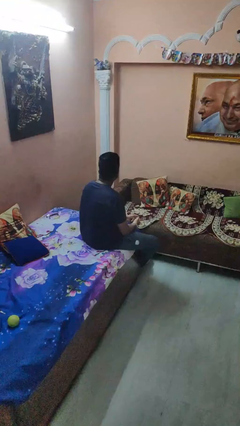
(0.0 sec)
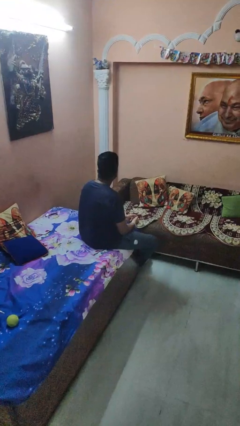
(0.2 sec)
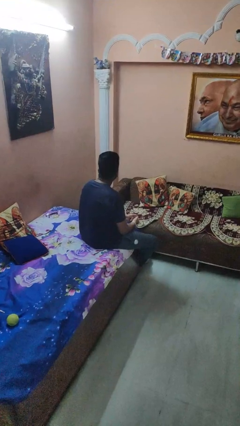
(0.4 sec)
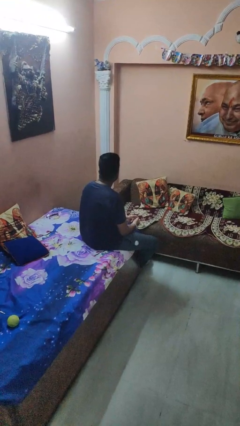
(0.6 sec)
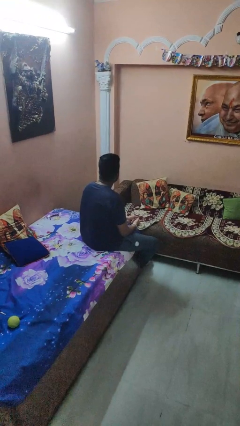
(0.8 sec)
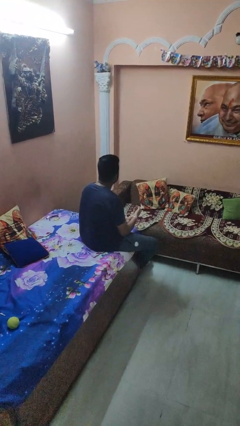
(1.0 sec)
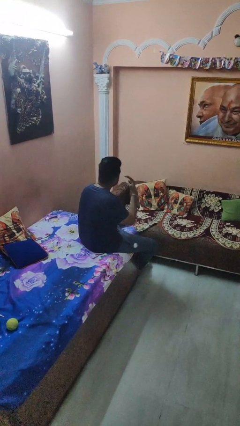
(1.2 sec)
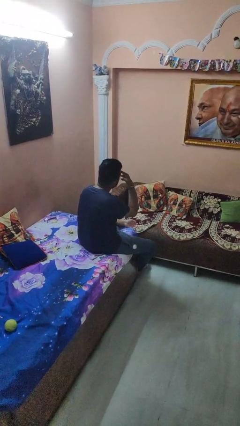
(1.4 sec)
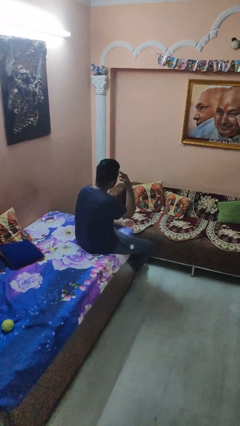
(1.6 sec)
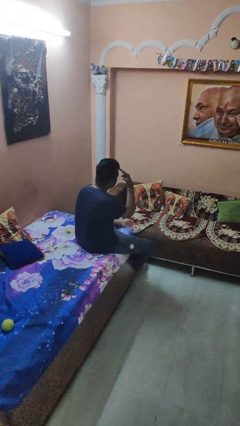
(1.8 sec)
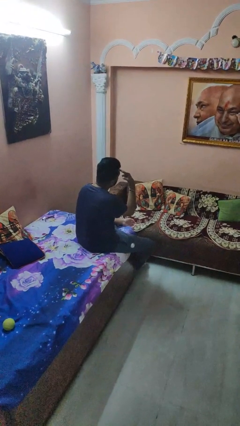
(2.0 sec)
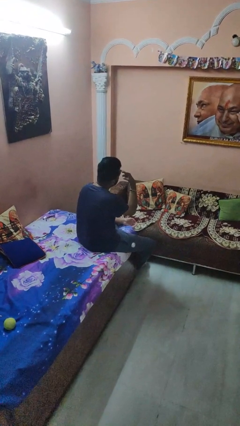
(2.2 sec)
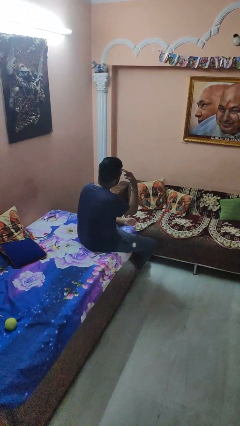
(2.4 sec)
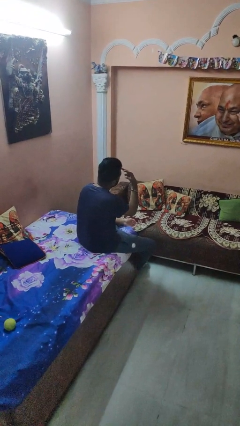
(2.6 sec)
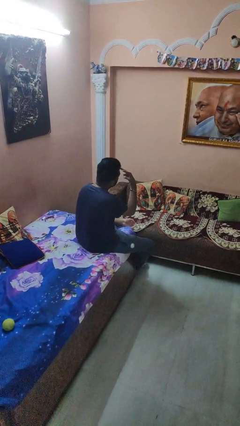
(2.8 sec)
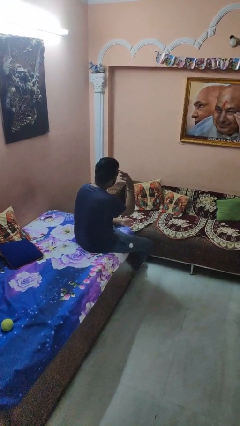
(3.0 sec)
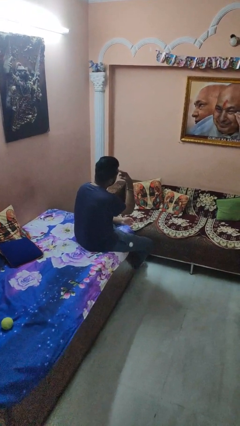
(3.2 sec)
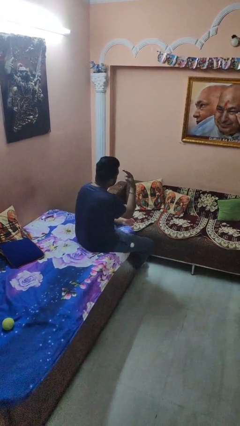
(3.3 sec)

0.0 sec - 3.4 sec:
person gestures watch closely

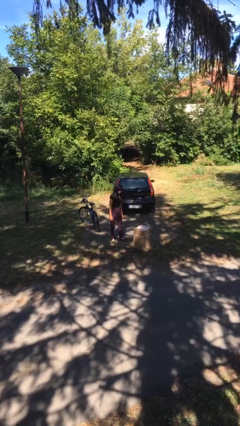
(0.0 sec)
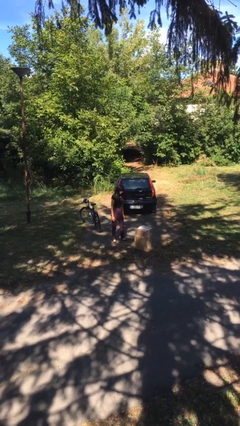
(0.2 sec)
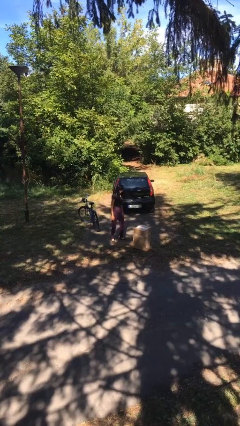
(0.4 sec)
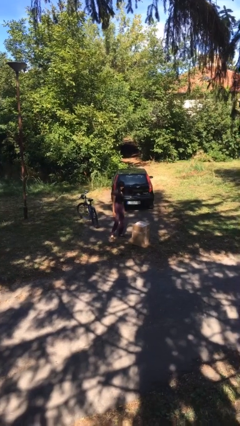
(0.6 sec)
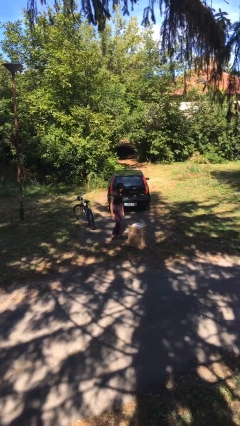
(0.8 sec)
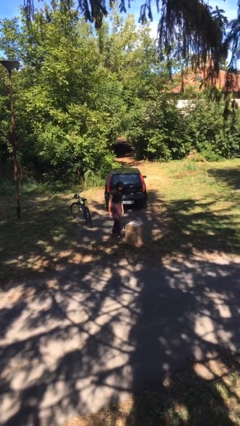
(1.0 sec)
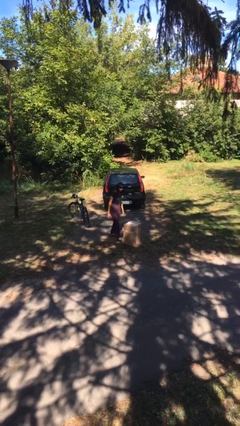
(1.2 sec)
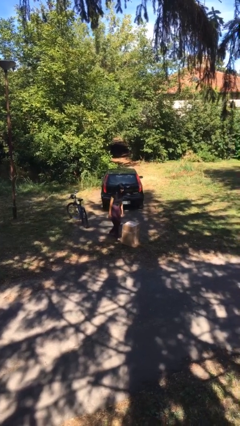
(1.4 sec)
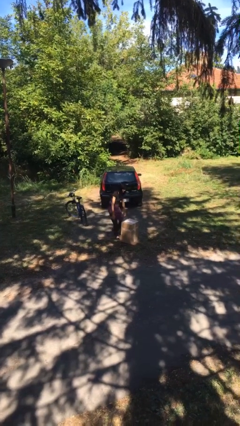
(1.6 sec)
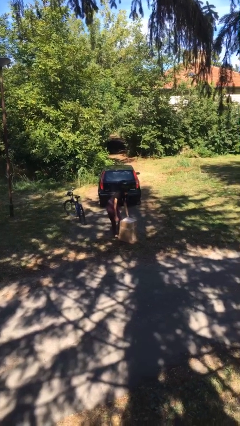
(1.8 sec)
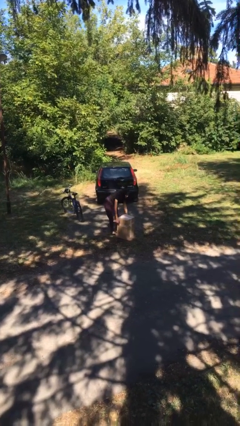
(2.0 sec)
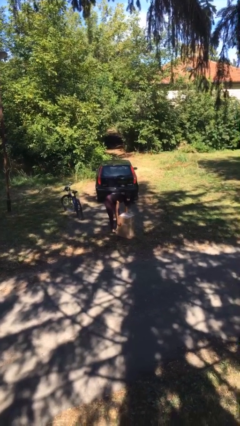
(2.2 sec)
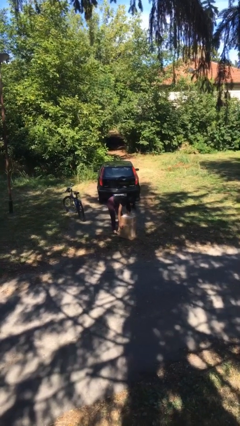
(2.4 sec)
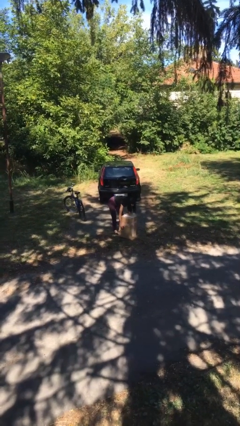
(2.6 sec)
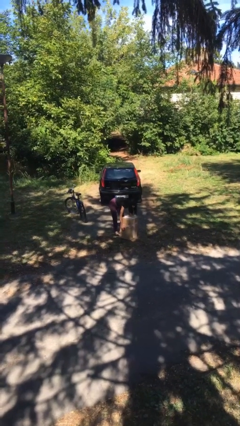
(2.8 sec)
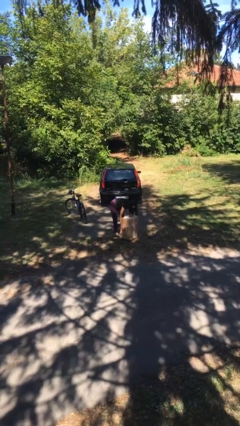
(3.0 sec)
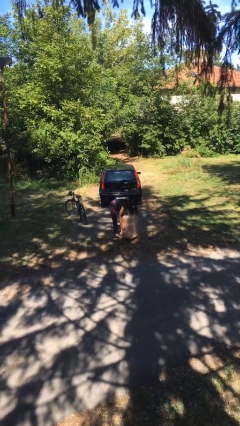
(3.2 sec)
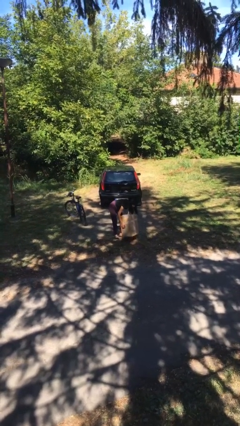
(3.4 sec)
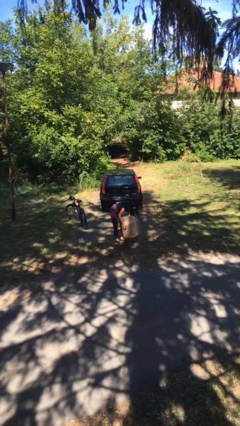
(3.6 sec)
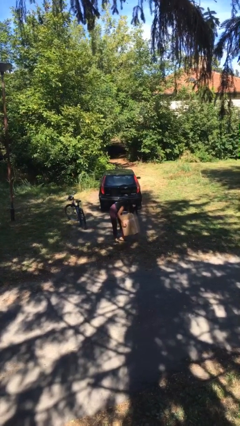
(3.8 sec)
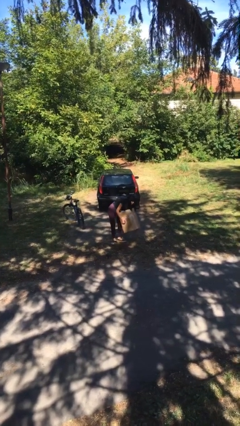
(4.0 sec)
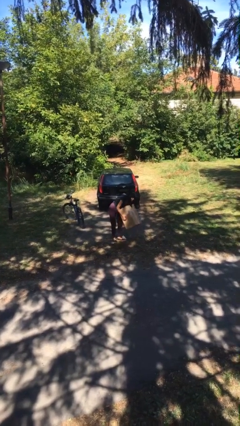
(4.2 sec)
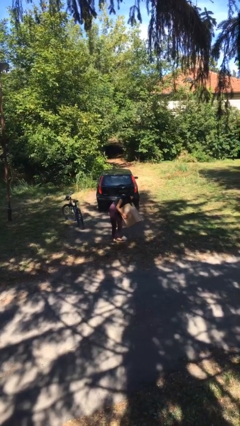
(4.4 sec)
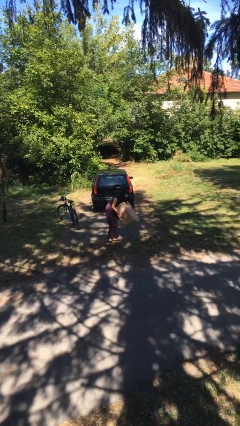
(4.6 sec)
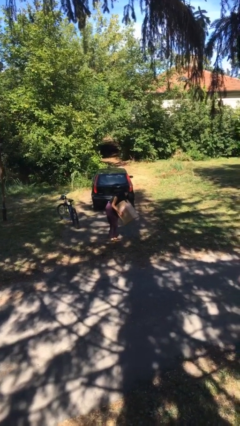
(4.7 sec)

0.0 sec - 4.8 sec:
person picks up object from floor

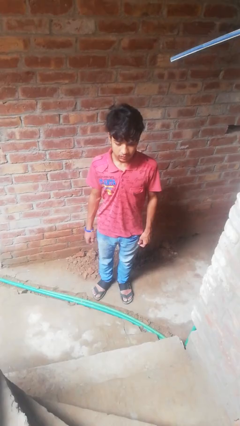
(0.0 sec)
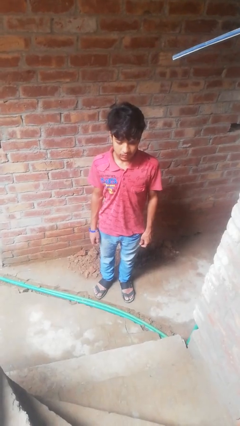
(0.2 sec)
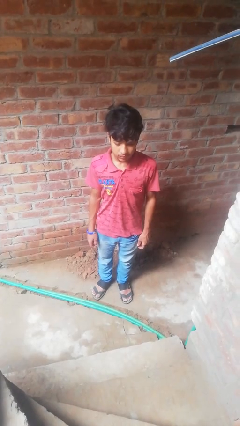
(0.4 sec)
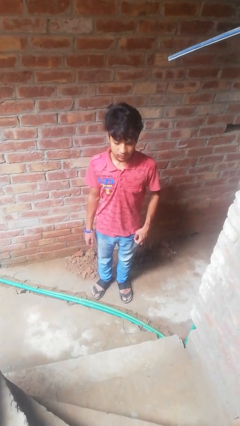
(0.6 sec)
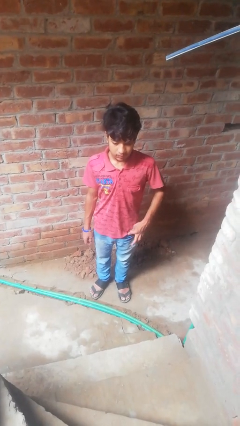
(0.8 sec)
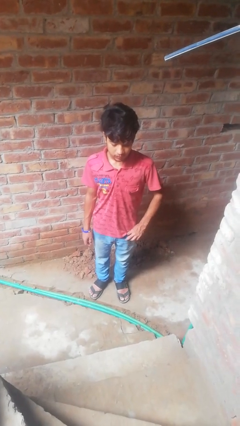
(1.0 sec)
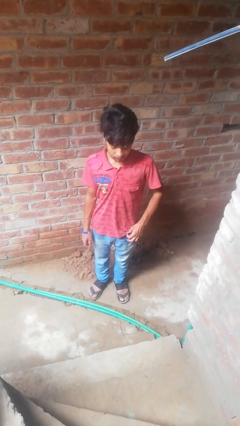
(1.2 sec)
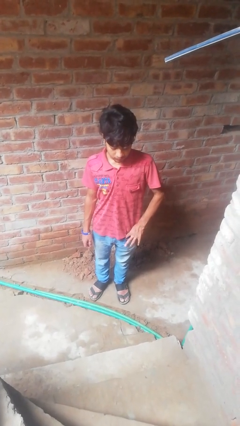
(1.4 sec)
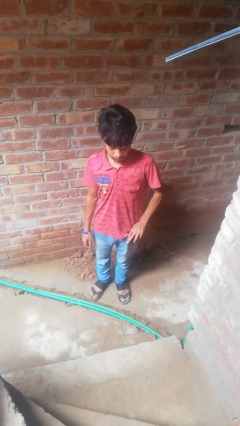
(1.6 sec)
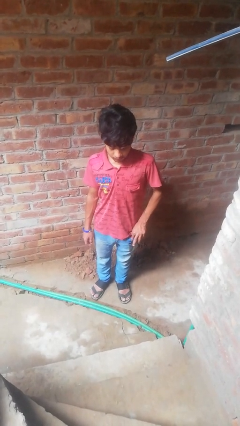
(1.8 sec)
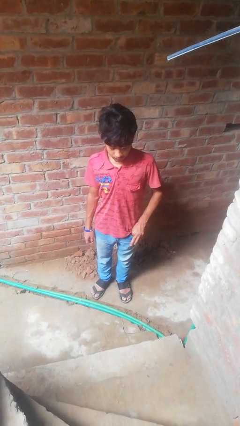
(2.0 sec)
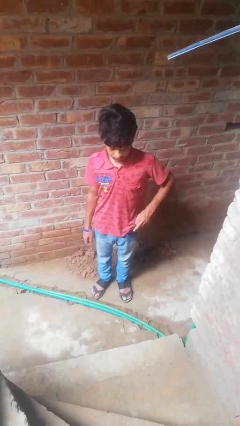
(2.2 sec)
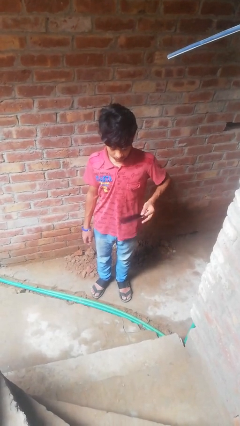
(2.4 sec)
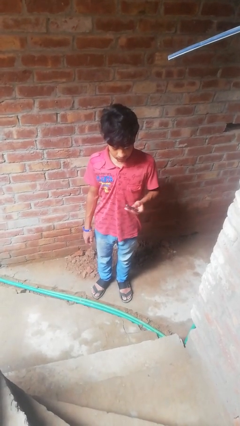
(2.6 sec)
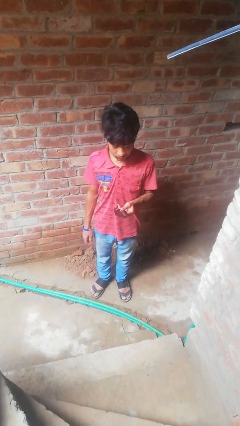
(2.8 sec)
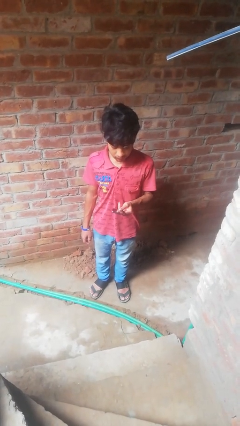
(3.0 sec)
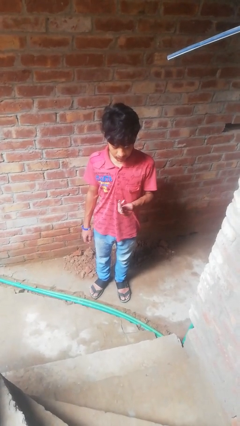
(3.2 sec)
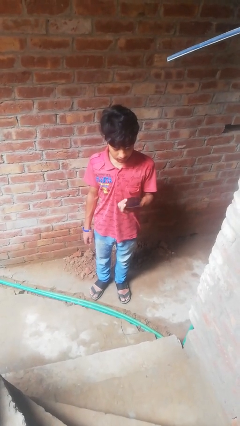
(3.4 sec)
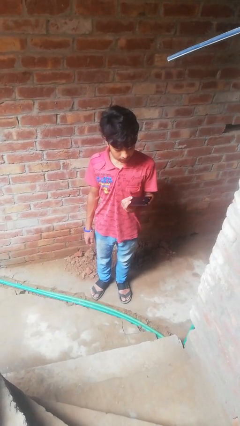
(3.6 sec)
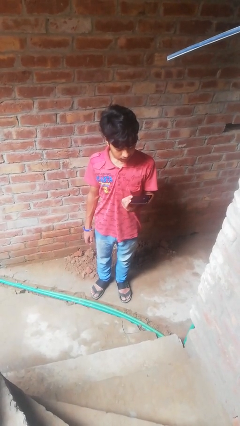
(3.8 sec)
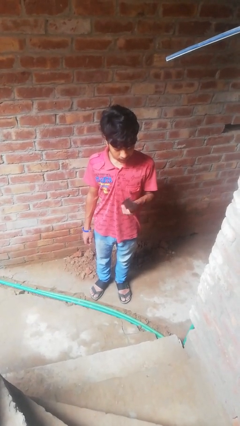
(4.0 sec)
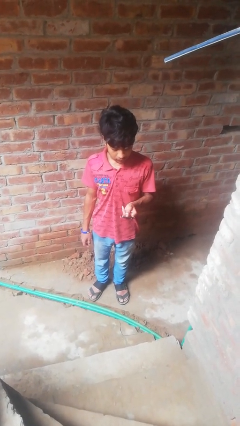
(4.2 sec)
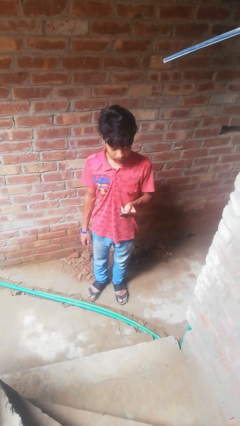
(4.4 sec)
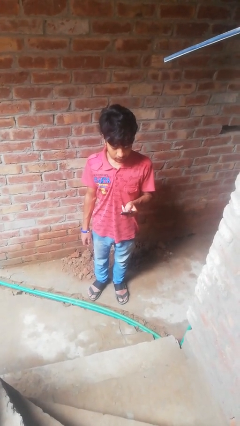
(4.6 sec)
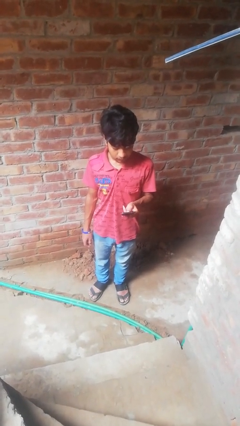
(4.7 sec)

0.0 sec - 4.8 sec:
person takes phone from pocket

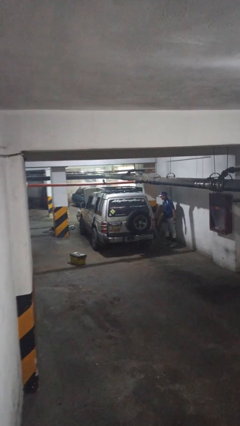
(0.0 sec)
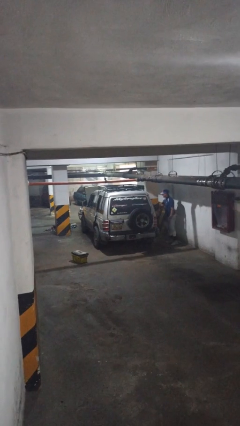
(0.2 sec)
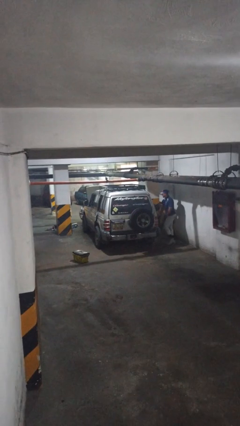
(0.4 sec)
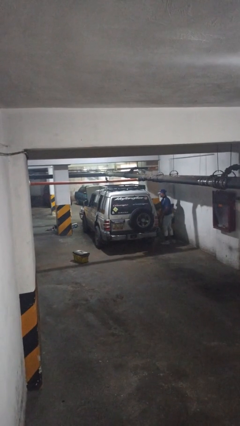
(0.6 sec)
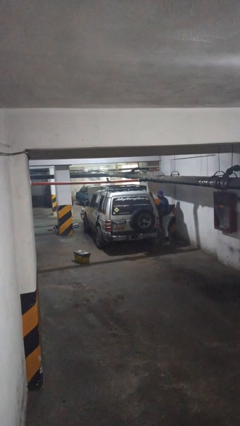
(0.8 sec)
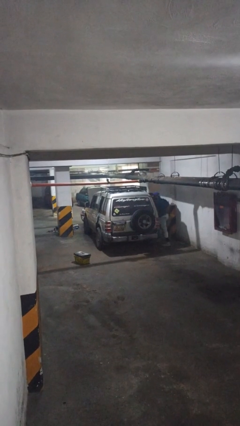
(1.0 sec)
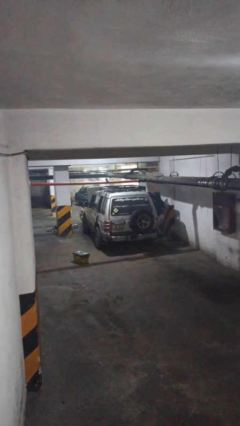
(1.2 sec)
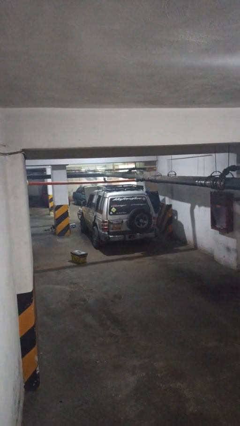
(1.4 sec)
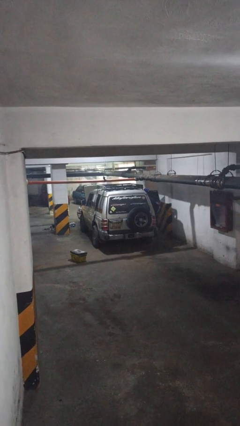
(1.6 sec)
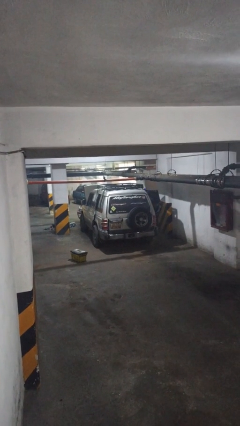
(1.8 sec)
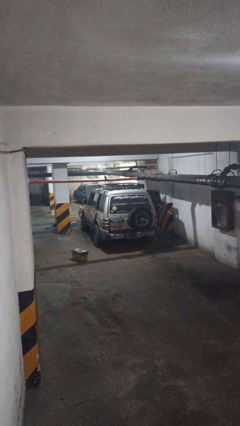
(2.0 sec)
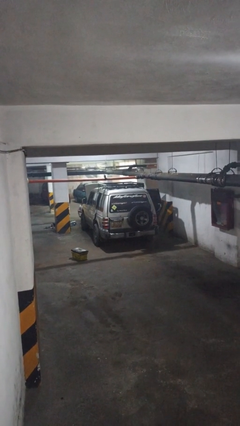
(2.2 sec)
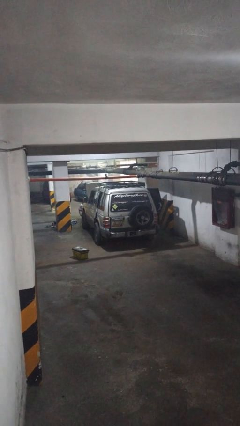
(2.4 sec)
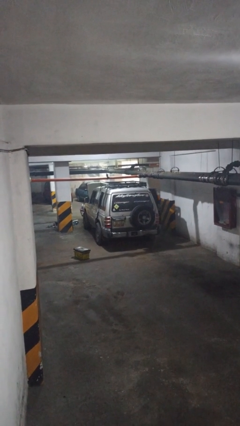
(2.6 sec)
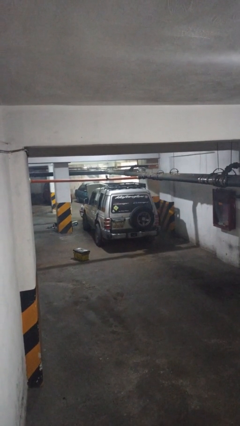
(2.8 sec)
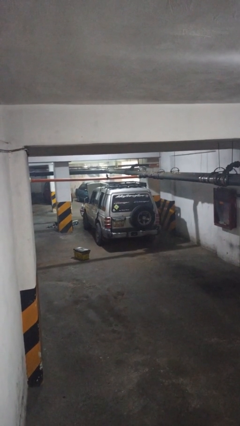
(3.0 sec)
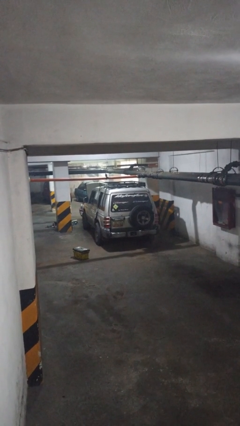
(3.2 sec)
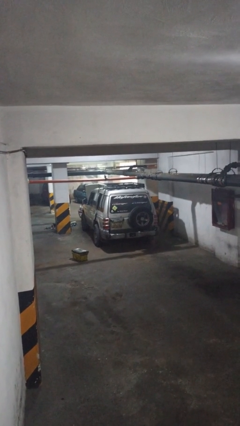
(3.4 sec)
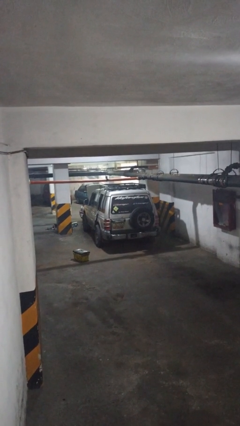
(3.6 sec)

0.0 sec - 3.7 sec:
car picks up person

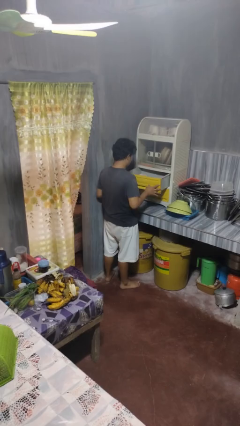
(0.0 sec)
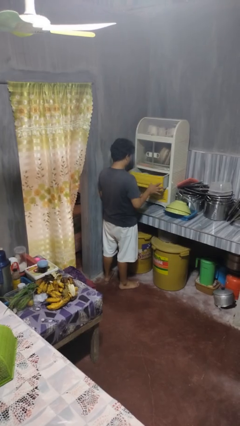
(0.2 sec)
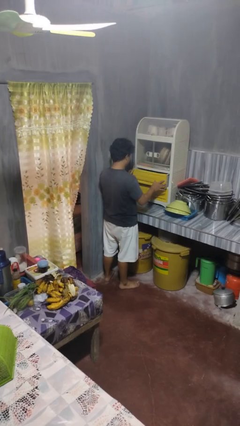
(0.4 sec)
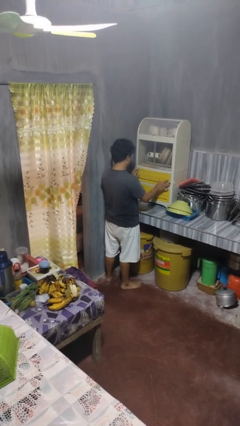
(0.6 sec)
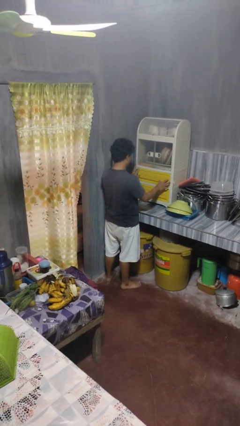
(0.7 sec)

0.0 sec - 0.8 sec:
person closes kitchen drawer

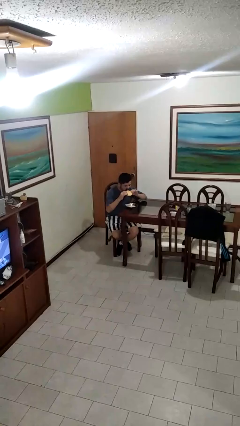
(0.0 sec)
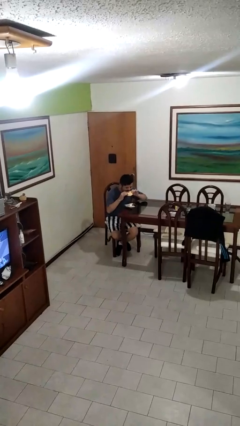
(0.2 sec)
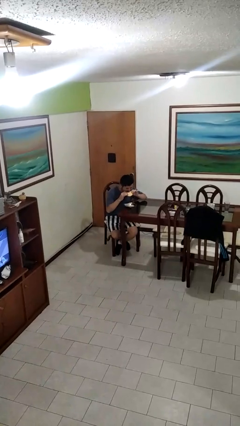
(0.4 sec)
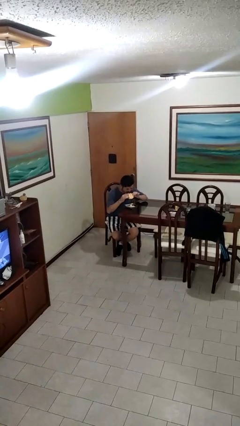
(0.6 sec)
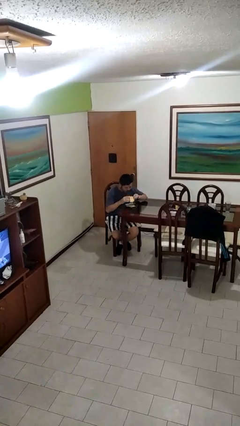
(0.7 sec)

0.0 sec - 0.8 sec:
person eats with hands
